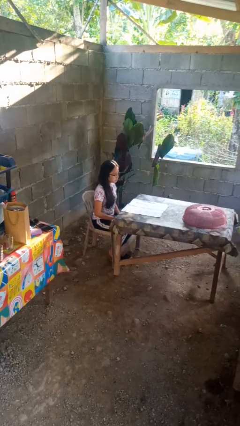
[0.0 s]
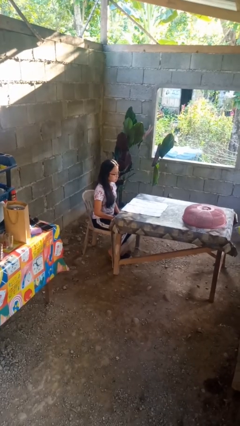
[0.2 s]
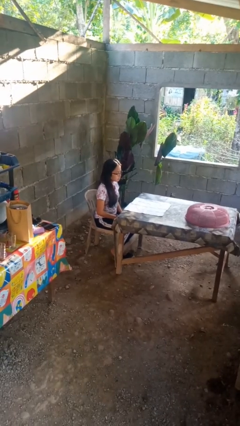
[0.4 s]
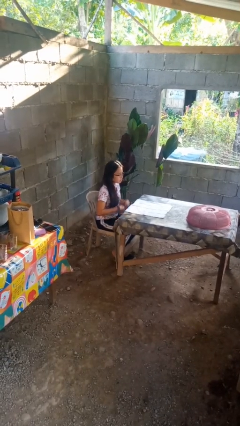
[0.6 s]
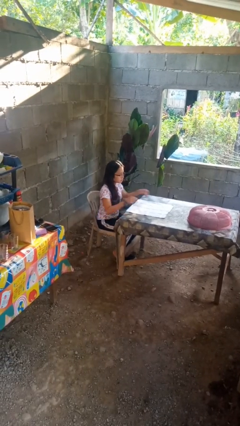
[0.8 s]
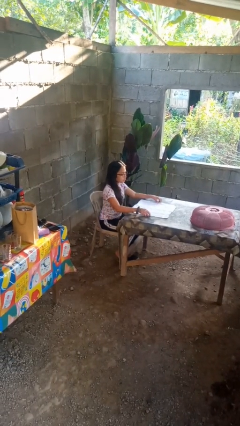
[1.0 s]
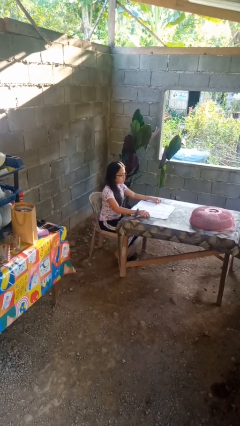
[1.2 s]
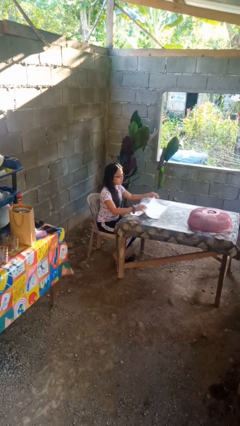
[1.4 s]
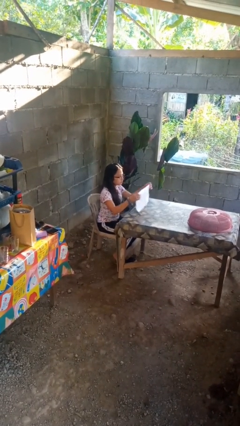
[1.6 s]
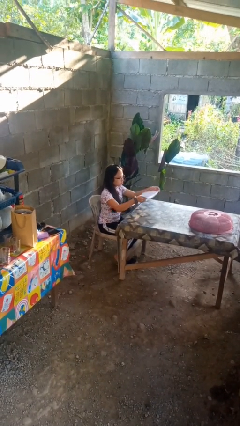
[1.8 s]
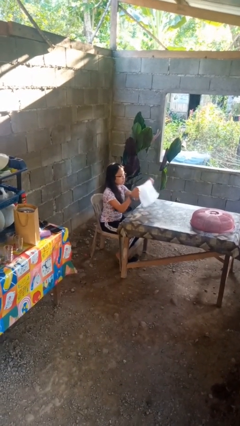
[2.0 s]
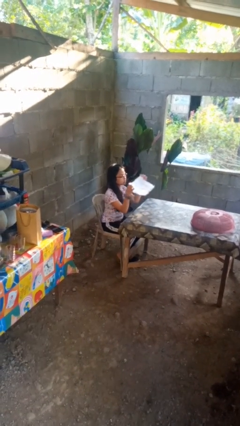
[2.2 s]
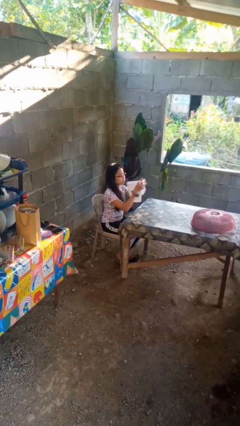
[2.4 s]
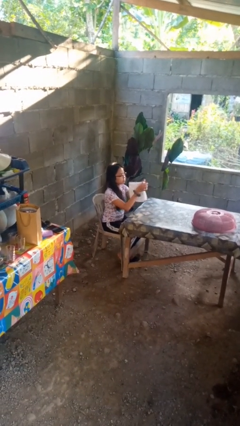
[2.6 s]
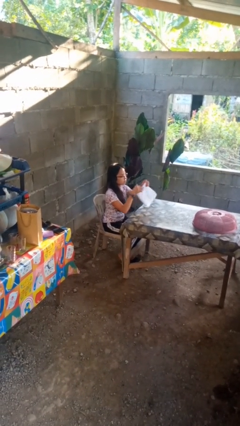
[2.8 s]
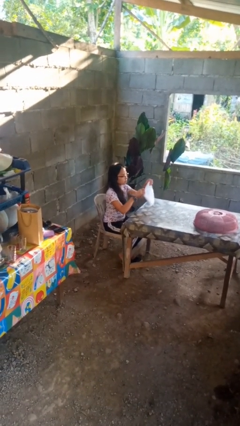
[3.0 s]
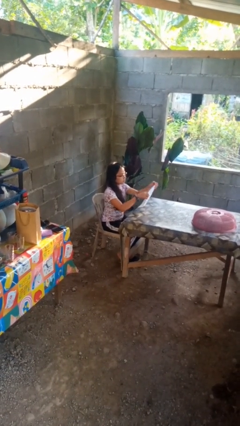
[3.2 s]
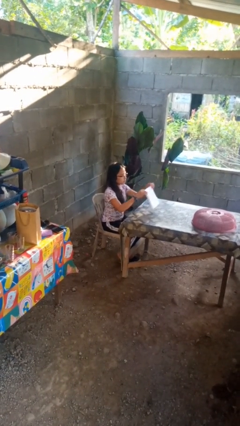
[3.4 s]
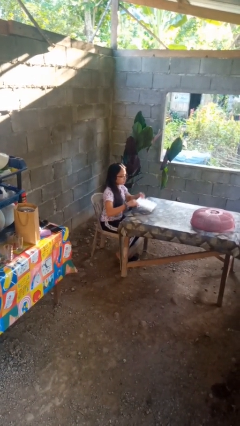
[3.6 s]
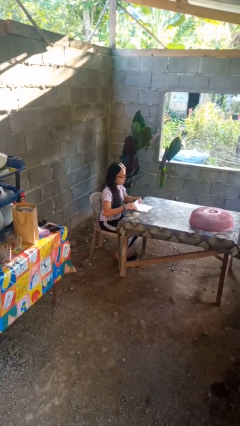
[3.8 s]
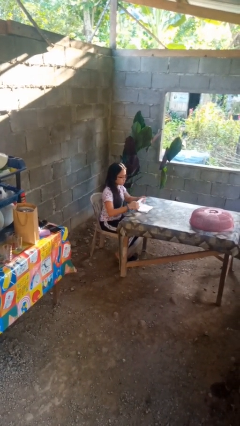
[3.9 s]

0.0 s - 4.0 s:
person folds tablecloth

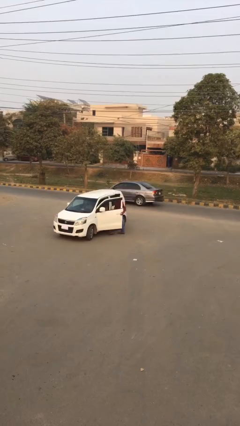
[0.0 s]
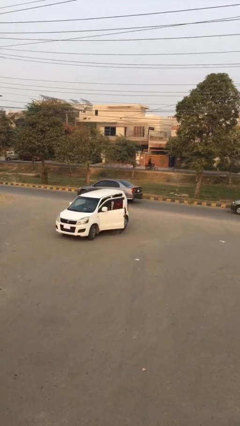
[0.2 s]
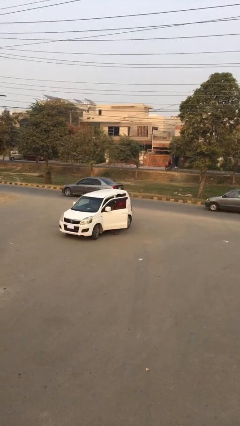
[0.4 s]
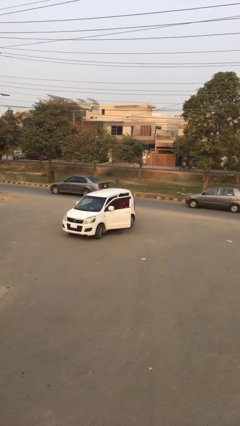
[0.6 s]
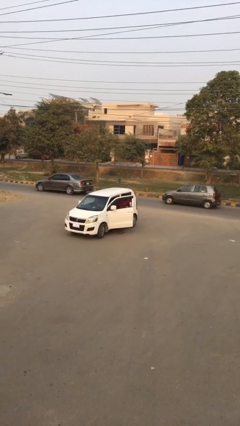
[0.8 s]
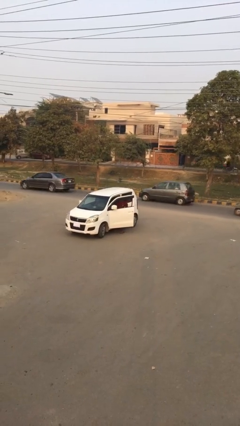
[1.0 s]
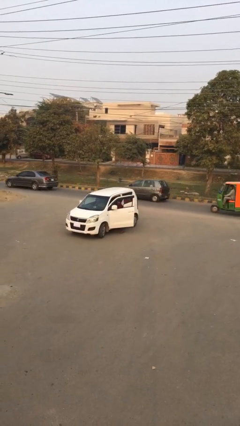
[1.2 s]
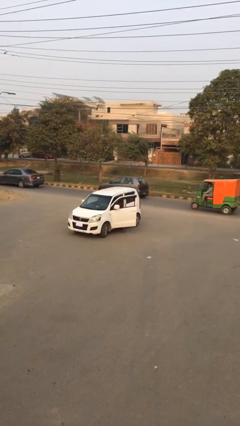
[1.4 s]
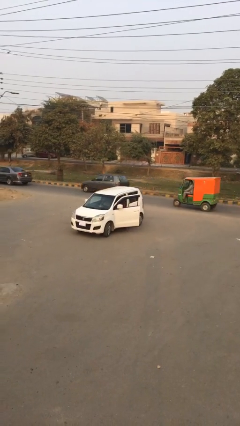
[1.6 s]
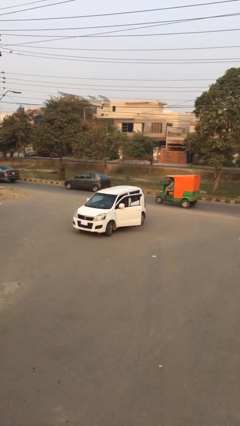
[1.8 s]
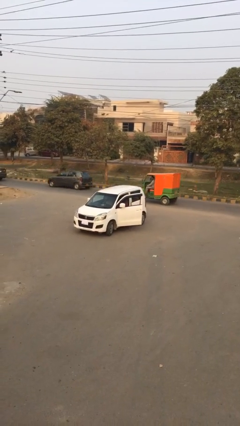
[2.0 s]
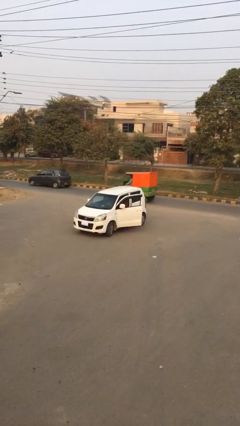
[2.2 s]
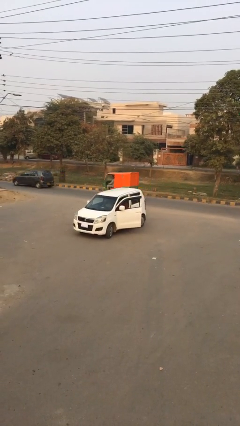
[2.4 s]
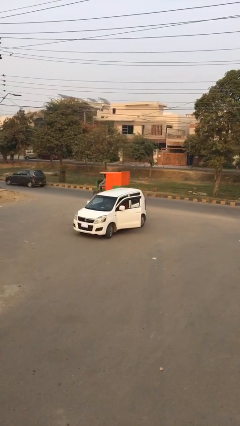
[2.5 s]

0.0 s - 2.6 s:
person enters car

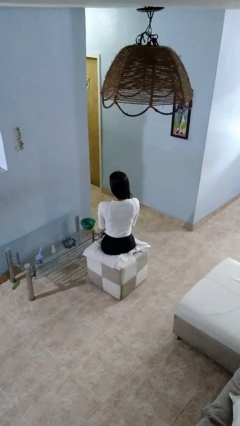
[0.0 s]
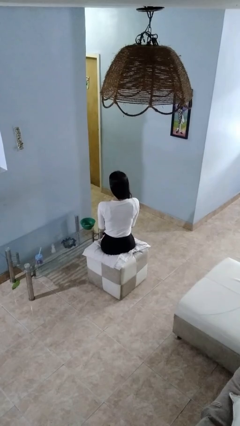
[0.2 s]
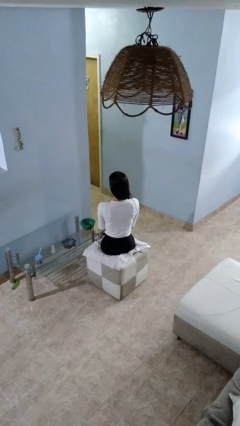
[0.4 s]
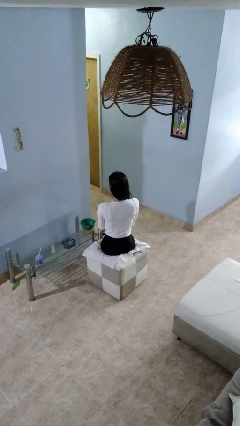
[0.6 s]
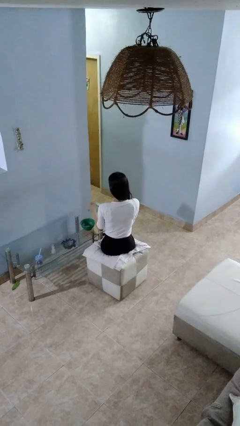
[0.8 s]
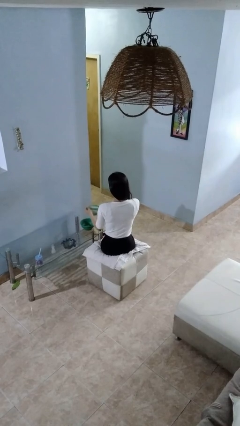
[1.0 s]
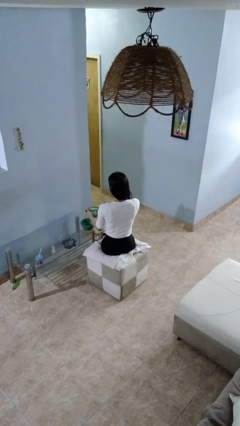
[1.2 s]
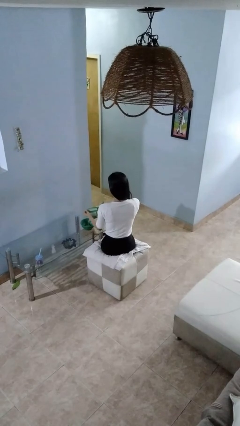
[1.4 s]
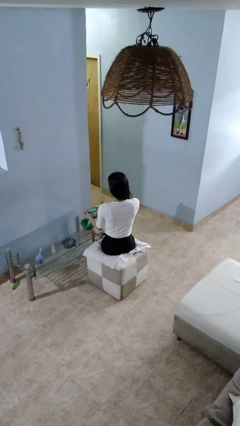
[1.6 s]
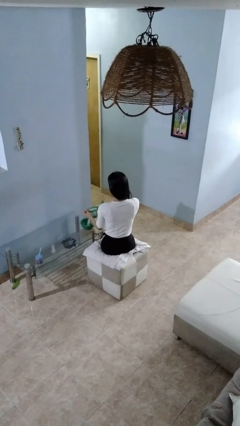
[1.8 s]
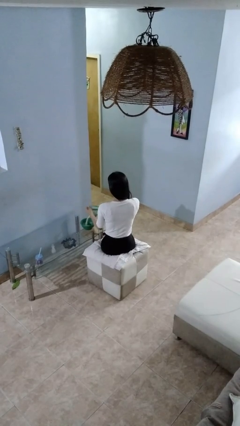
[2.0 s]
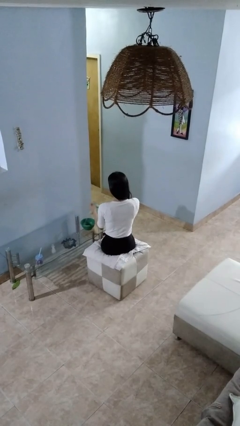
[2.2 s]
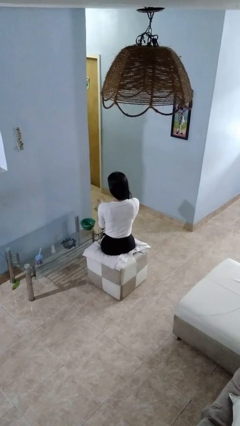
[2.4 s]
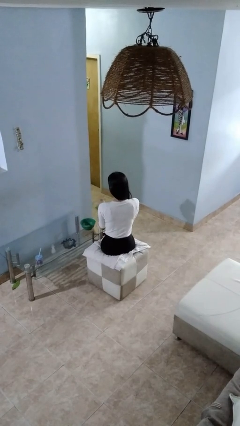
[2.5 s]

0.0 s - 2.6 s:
person pours into bowl

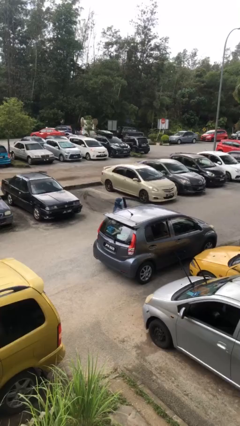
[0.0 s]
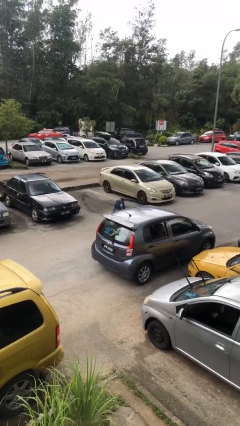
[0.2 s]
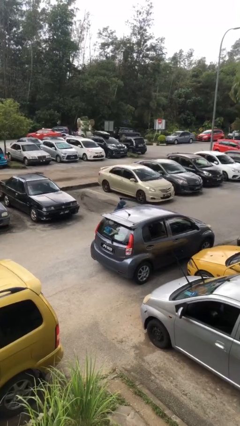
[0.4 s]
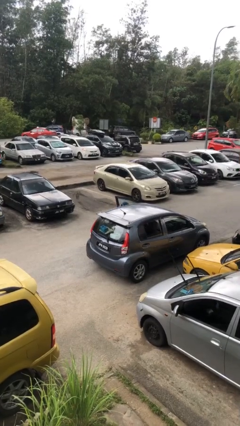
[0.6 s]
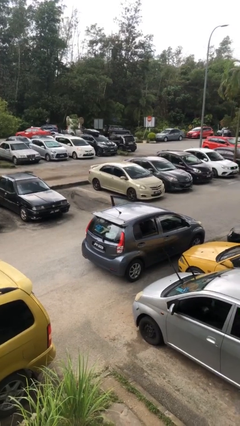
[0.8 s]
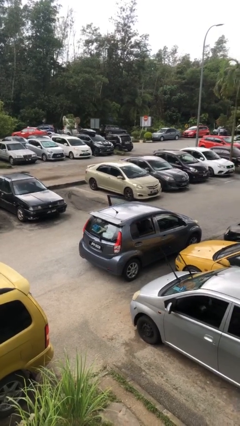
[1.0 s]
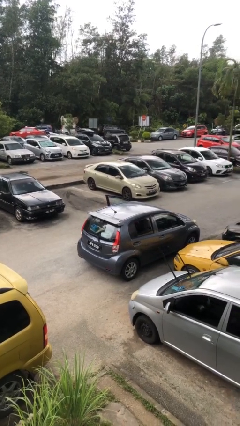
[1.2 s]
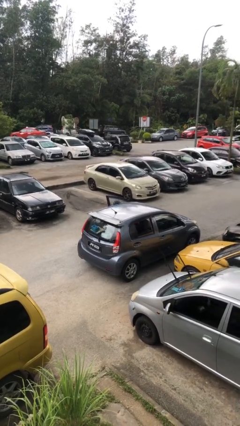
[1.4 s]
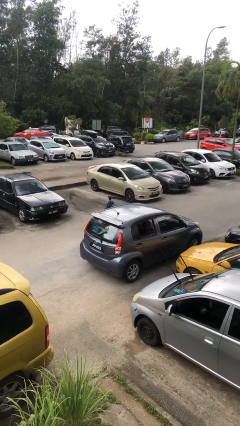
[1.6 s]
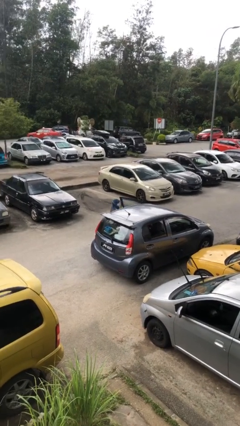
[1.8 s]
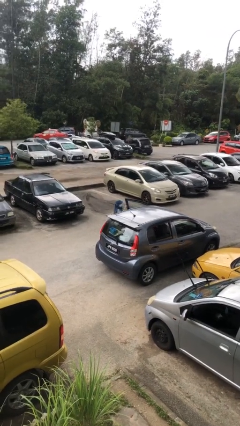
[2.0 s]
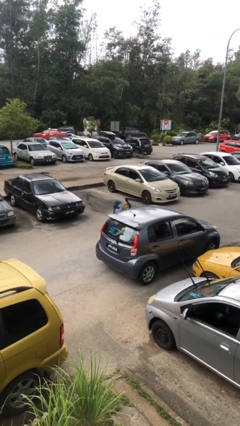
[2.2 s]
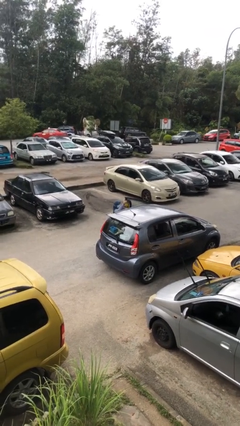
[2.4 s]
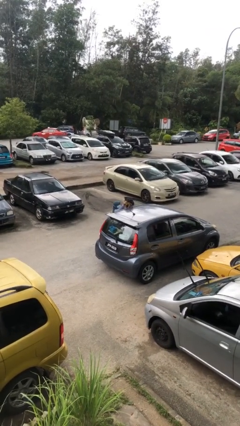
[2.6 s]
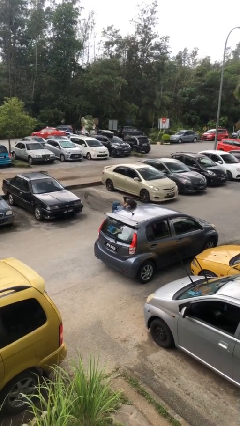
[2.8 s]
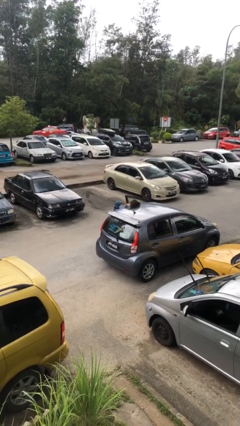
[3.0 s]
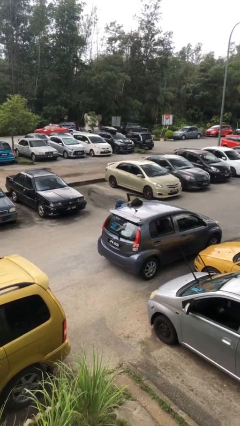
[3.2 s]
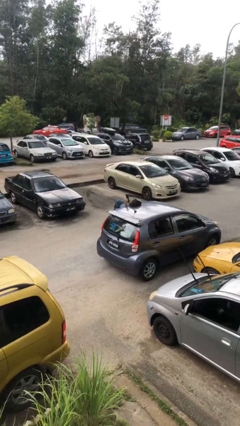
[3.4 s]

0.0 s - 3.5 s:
person unloads car

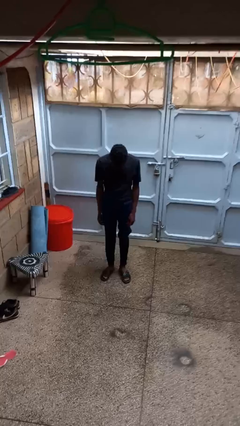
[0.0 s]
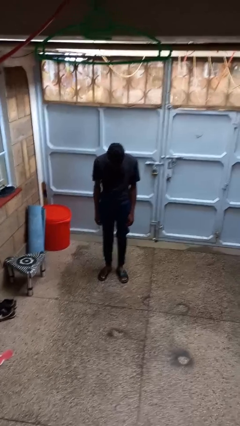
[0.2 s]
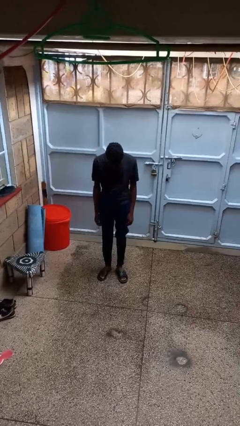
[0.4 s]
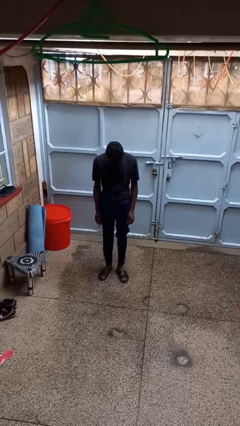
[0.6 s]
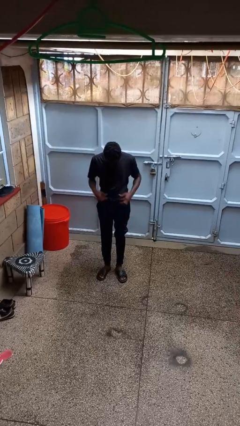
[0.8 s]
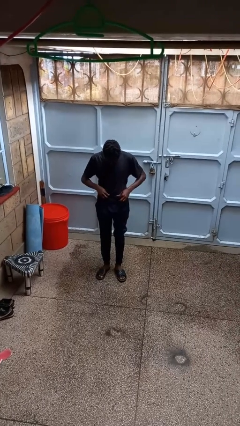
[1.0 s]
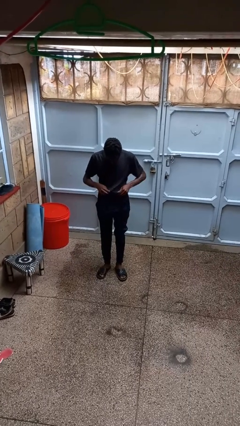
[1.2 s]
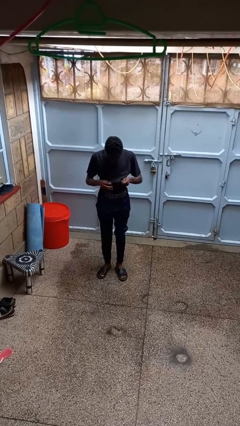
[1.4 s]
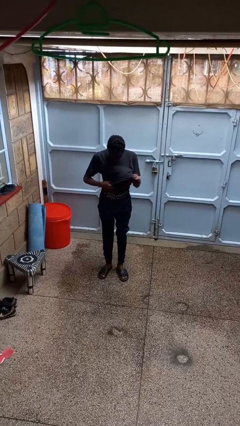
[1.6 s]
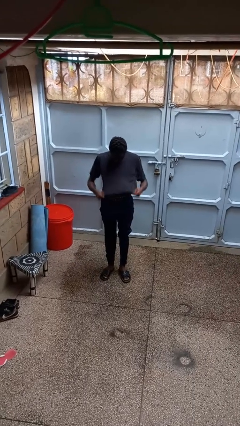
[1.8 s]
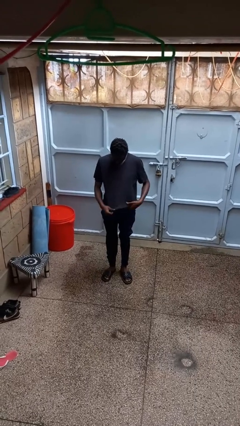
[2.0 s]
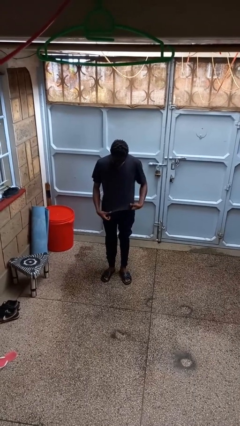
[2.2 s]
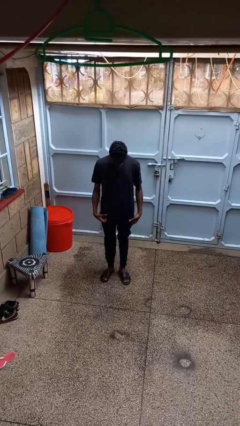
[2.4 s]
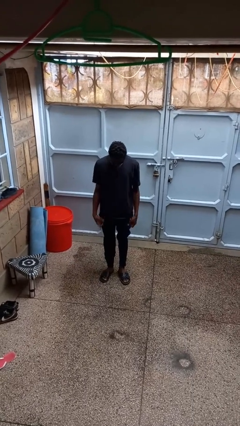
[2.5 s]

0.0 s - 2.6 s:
person untucks shirt

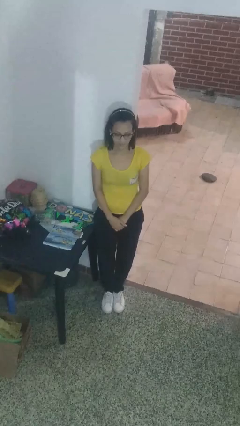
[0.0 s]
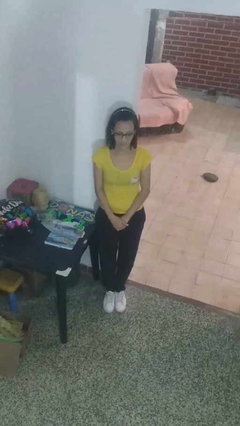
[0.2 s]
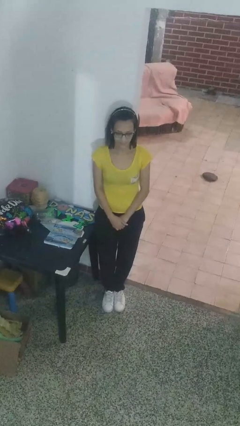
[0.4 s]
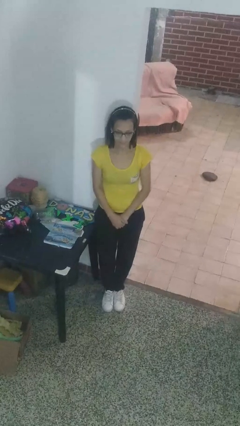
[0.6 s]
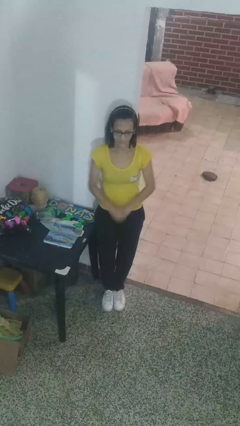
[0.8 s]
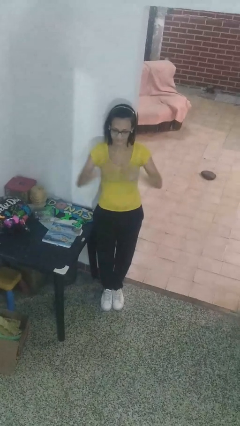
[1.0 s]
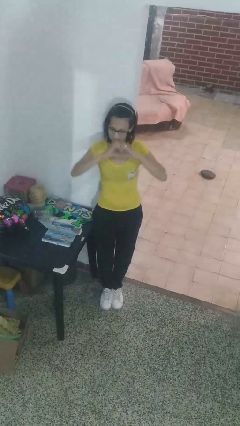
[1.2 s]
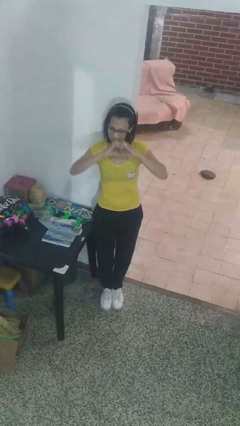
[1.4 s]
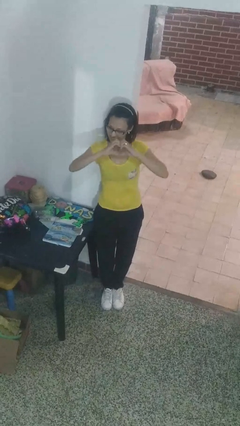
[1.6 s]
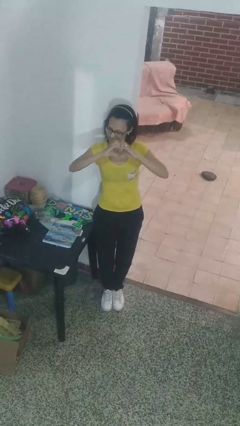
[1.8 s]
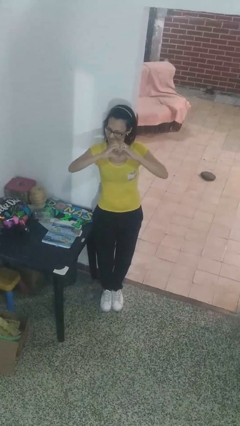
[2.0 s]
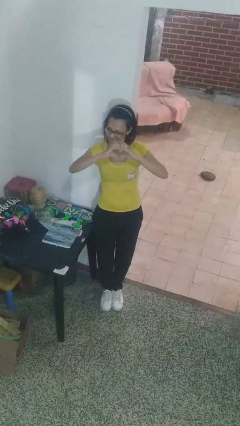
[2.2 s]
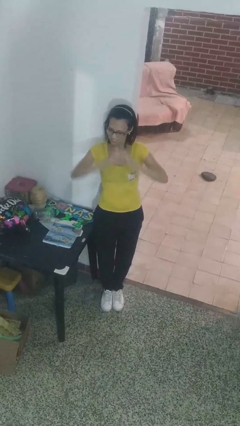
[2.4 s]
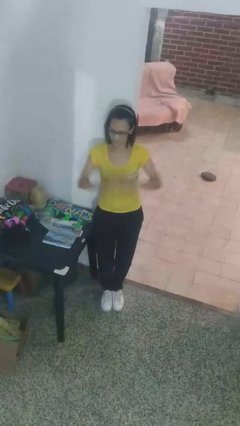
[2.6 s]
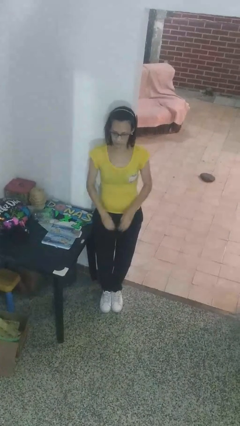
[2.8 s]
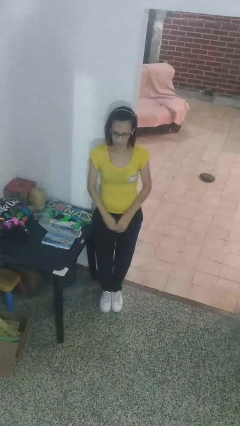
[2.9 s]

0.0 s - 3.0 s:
person gestures heart
